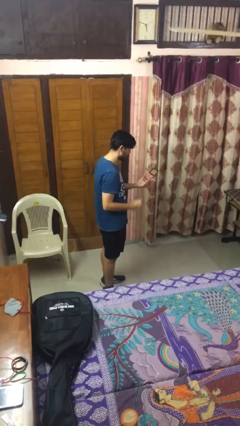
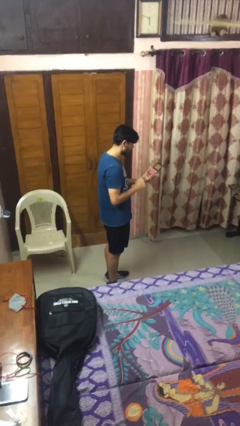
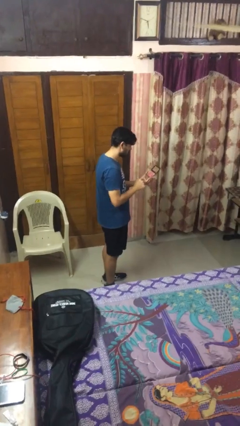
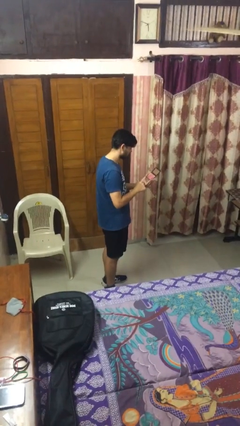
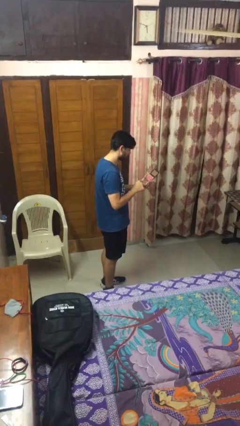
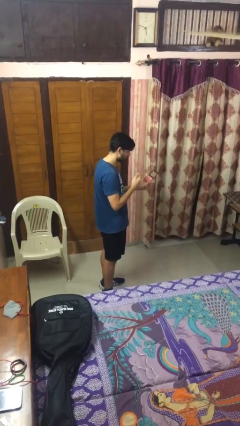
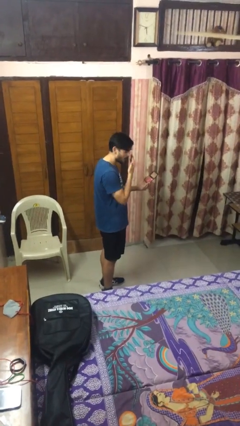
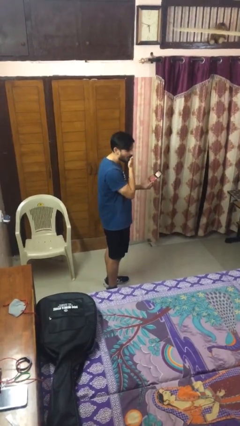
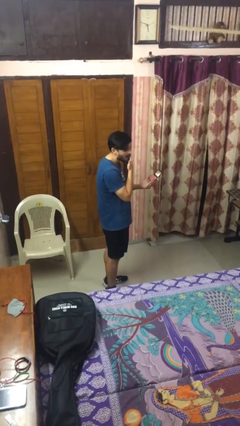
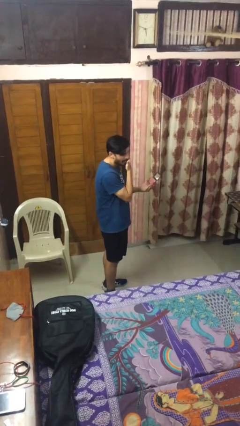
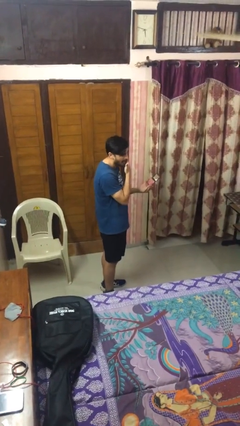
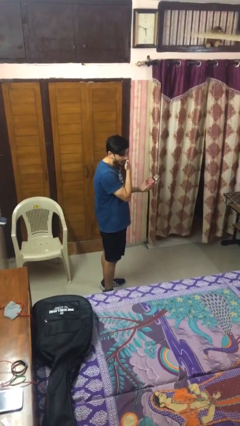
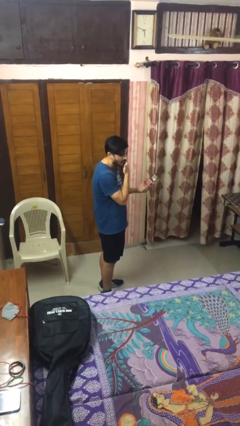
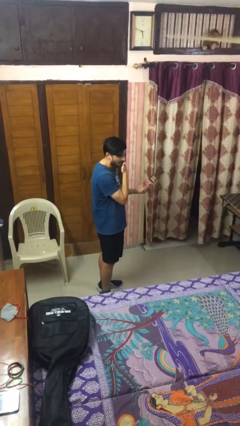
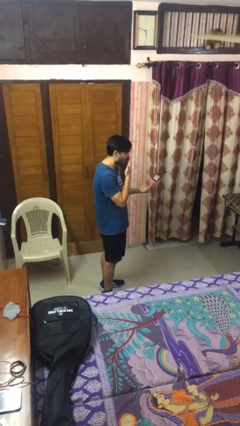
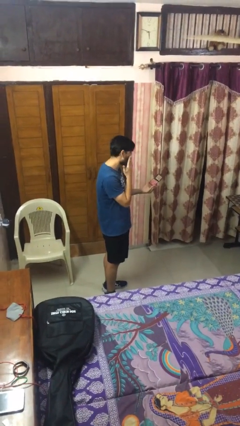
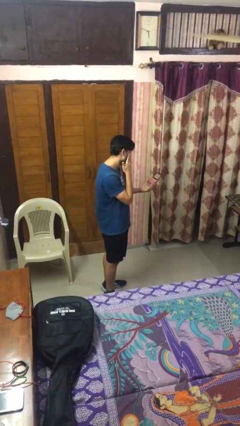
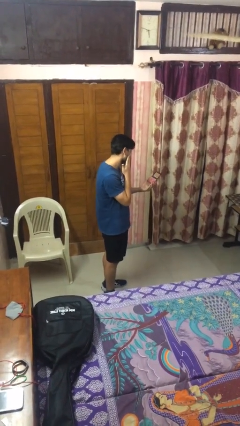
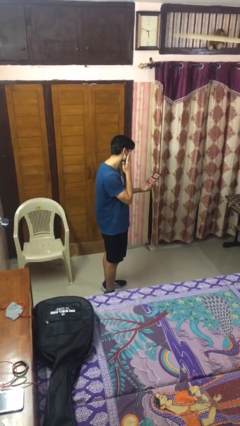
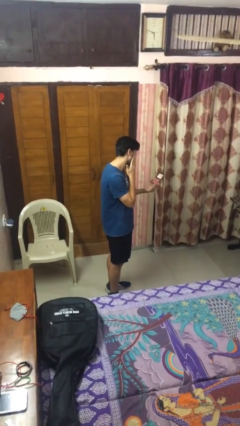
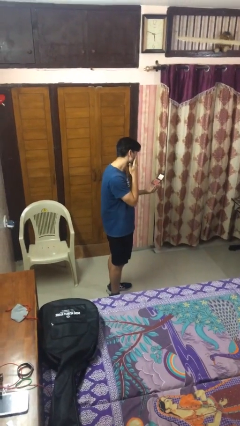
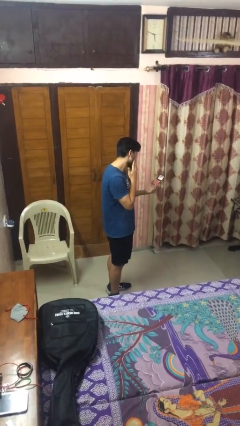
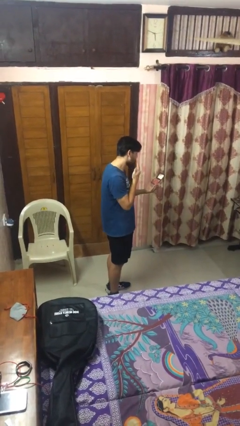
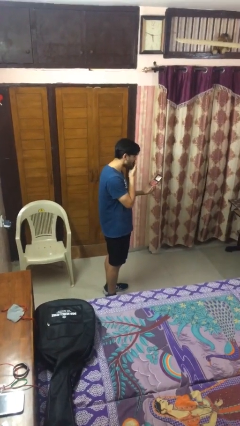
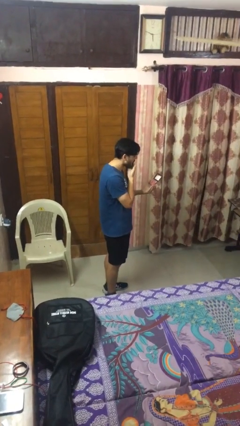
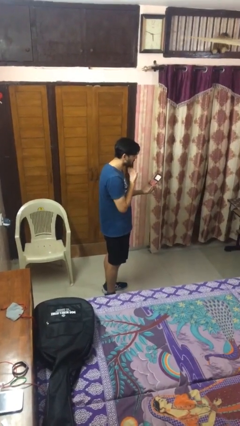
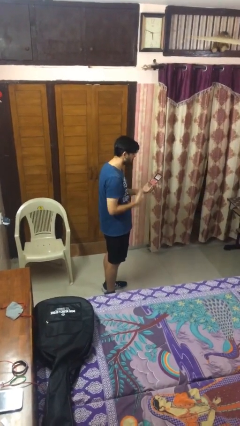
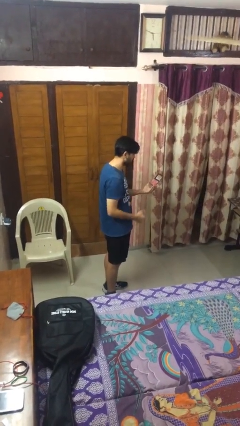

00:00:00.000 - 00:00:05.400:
person applies foundation makeup

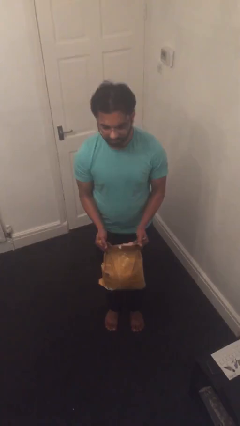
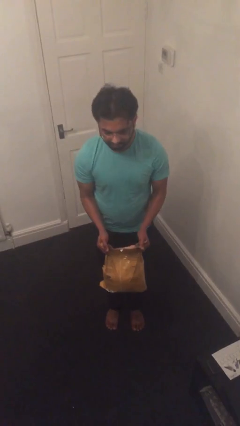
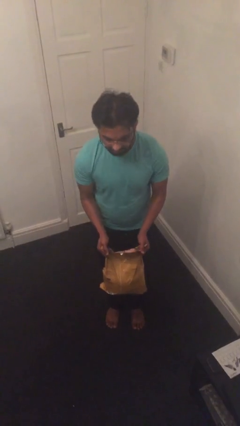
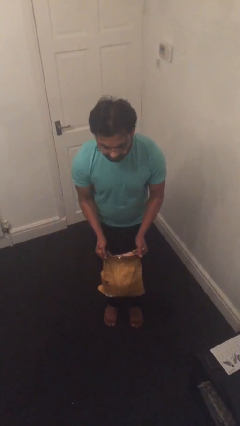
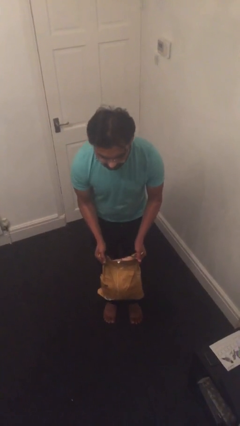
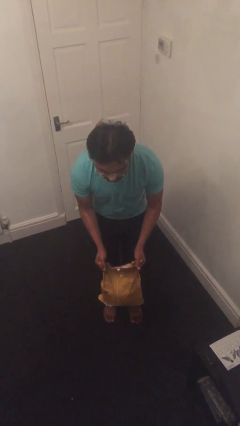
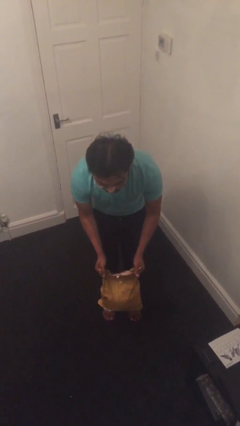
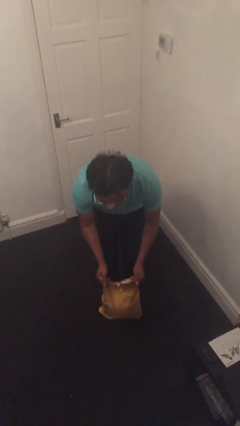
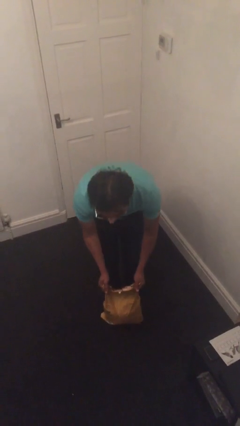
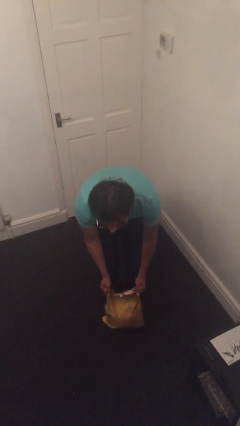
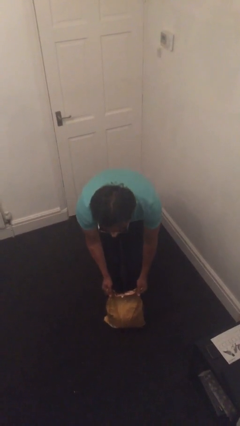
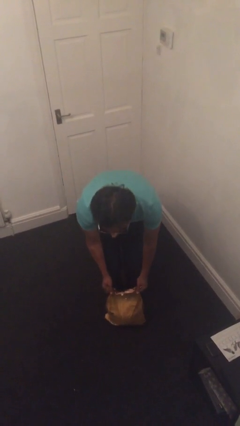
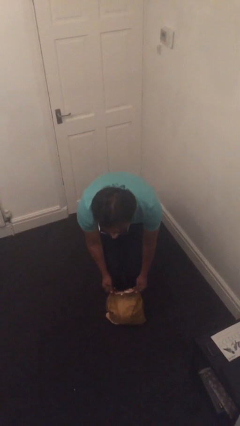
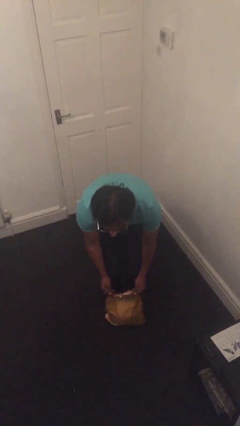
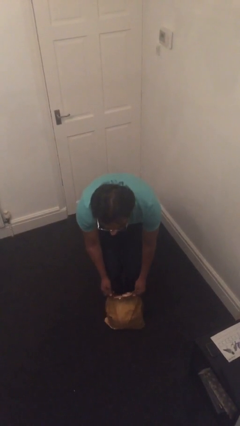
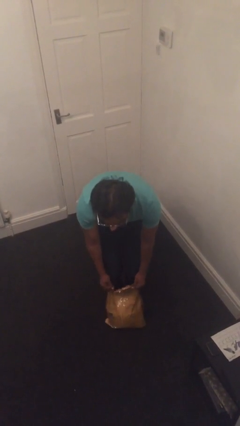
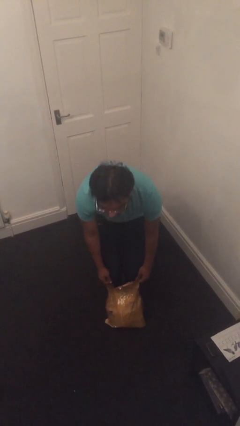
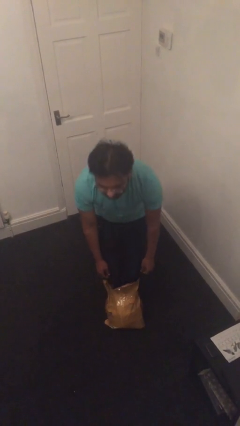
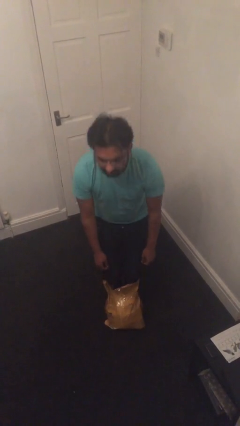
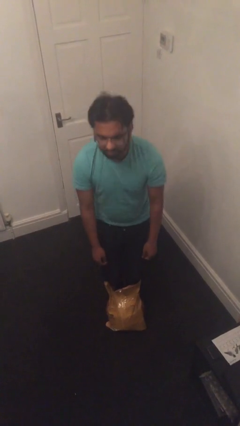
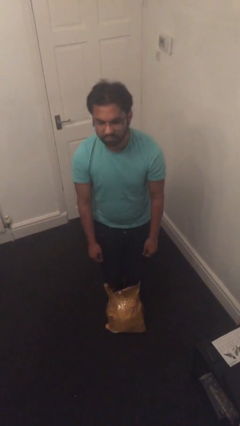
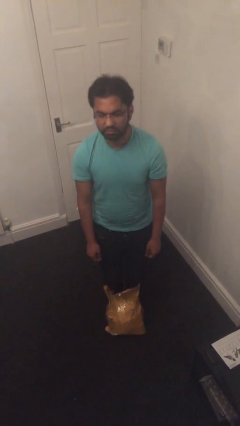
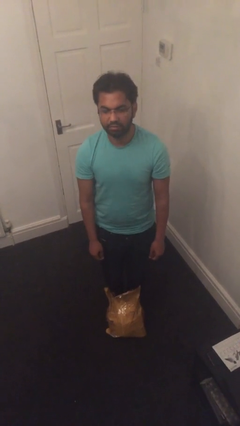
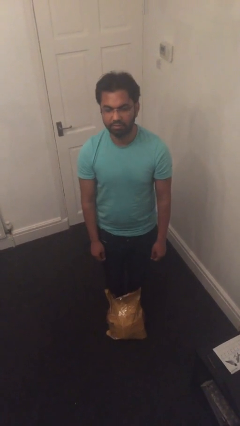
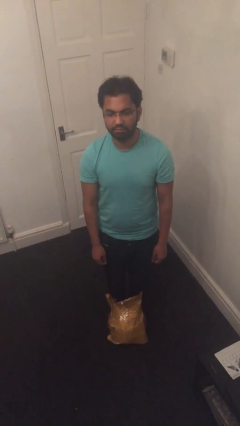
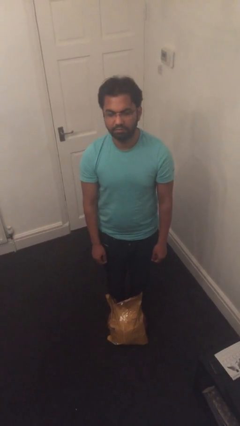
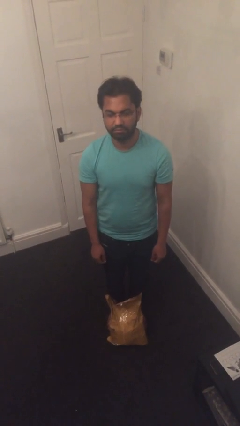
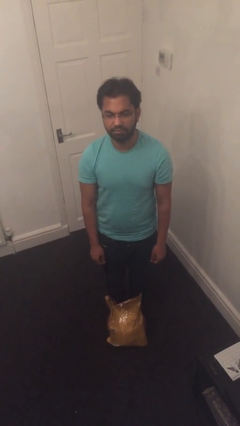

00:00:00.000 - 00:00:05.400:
person puts down object on floor

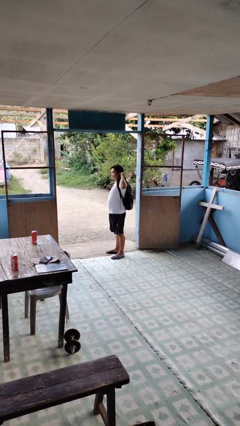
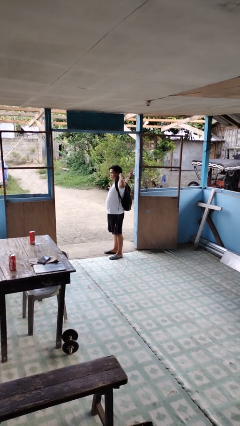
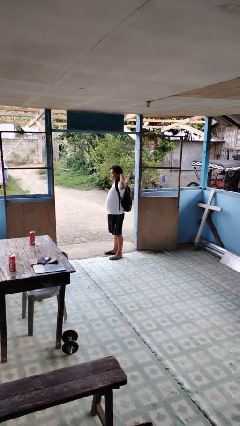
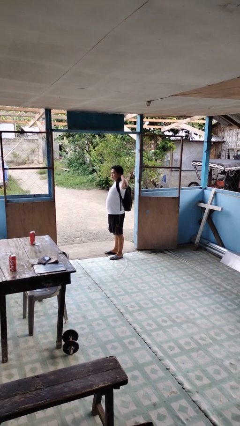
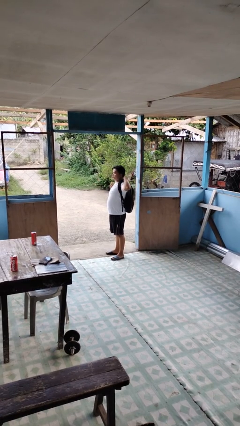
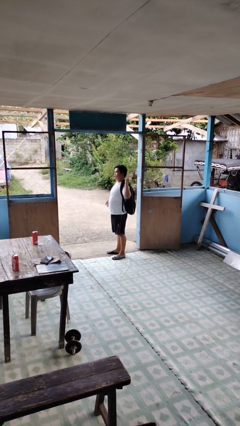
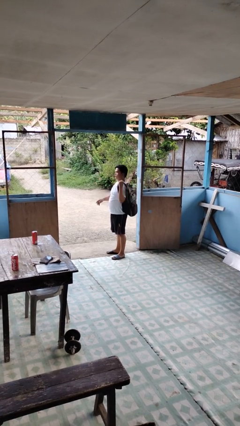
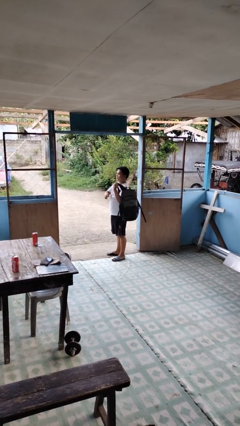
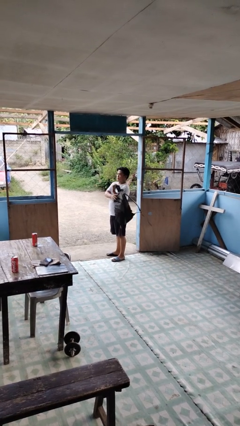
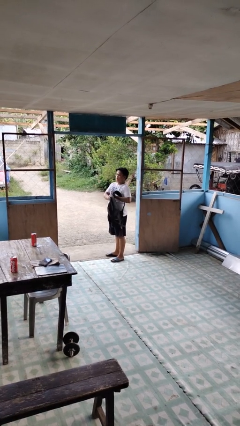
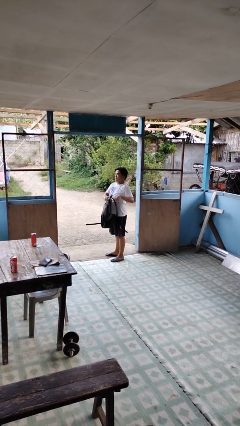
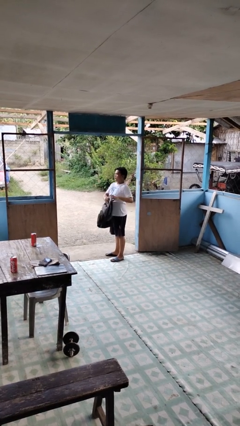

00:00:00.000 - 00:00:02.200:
person takes off backpack

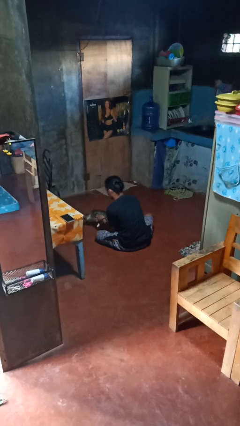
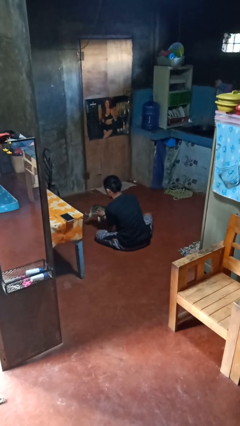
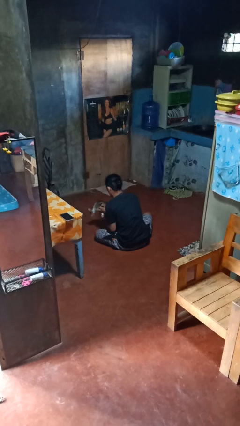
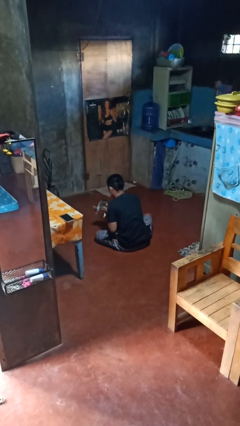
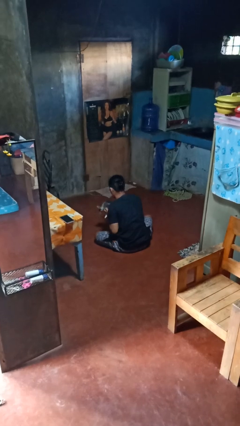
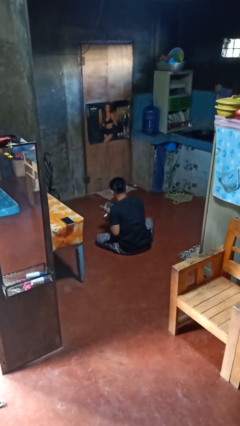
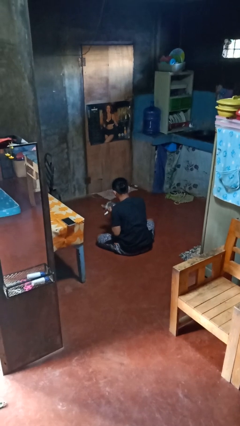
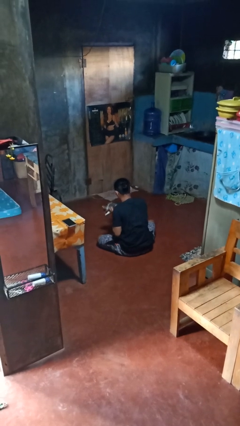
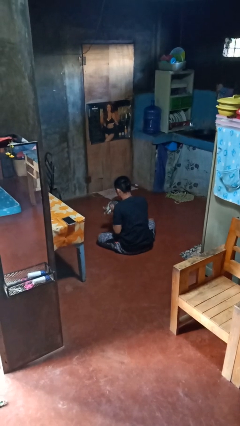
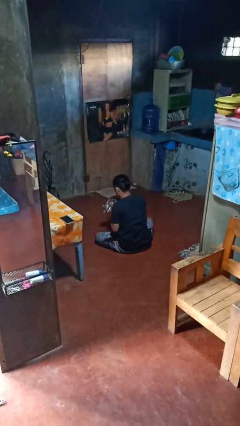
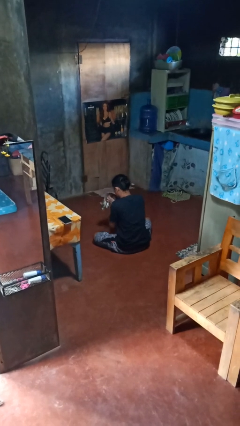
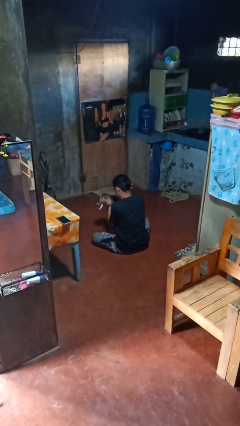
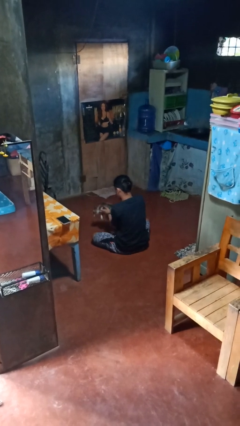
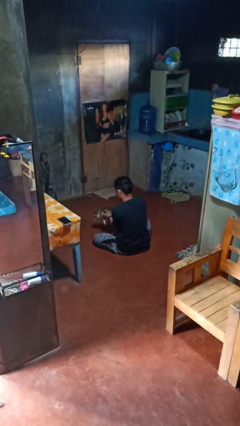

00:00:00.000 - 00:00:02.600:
person hugs cat

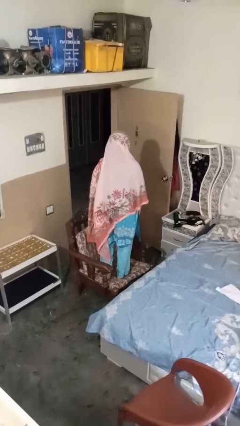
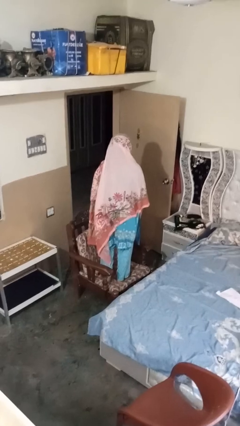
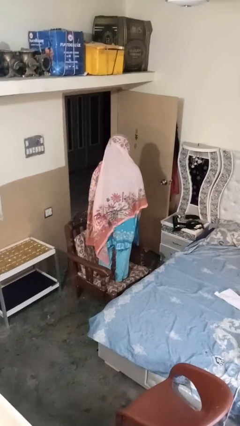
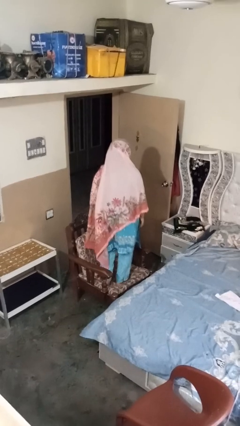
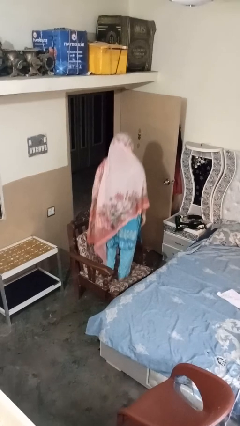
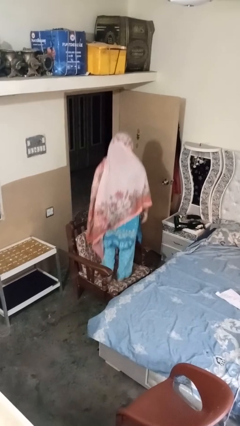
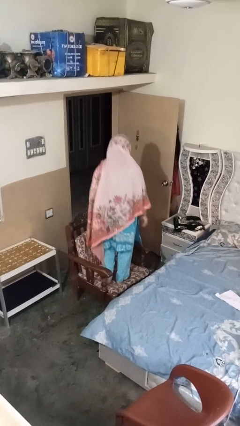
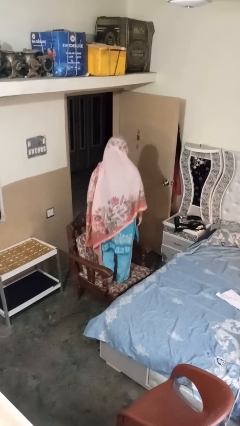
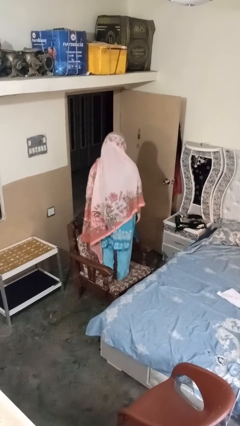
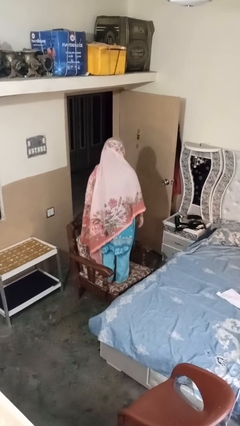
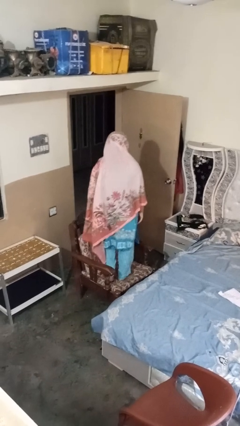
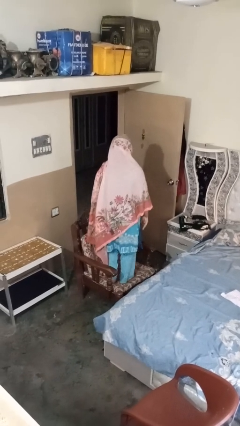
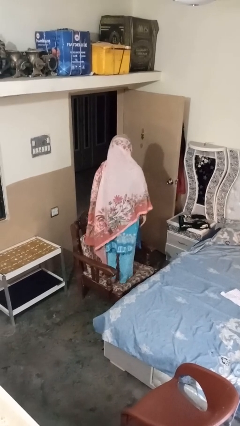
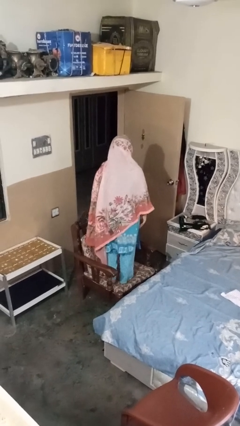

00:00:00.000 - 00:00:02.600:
person jumps on couch
